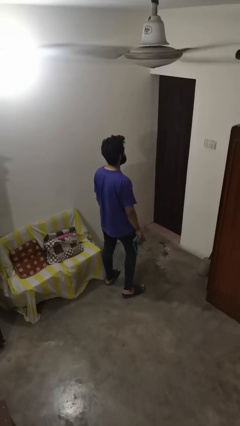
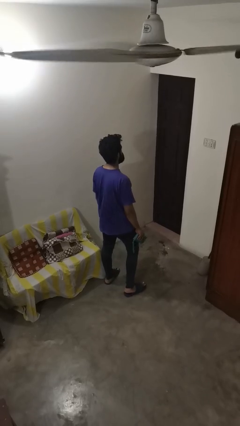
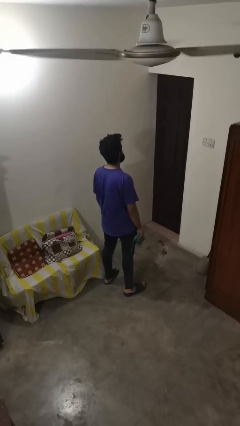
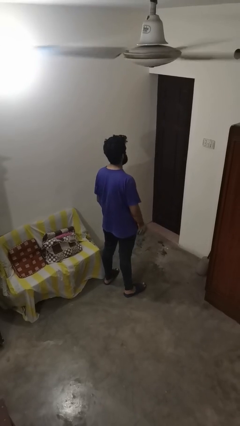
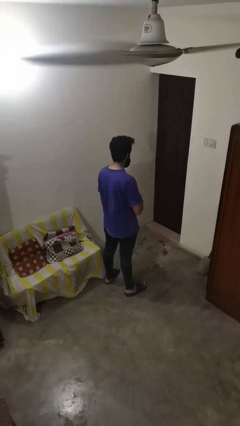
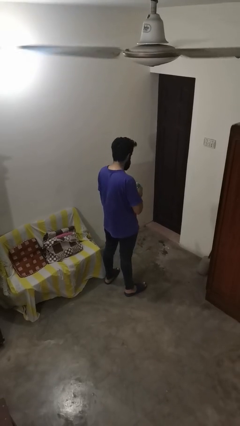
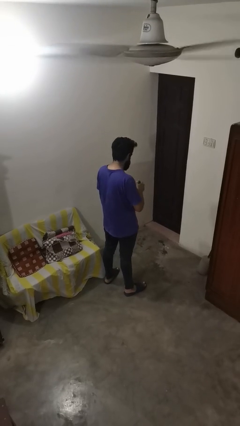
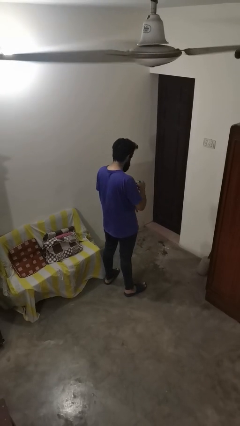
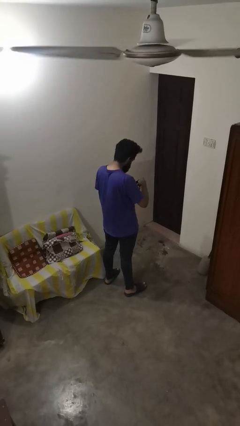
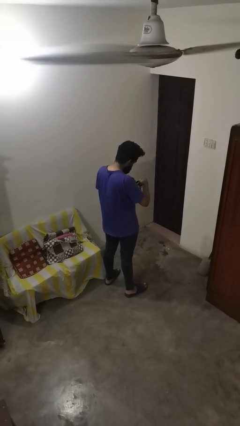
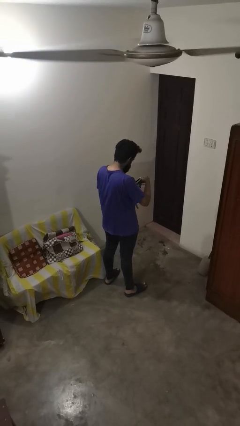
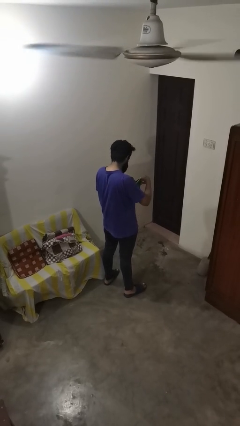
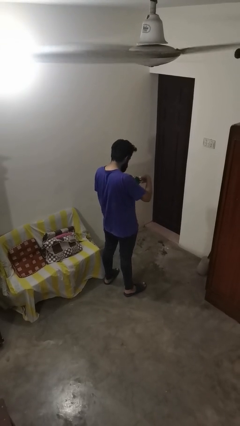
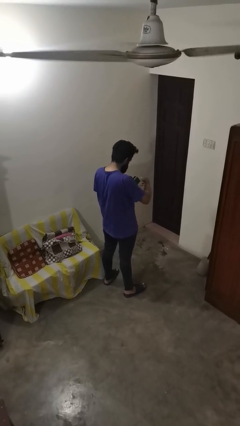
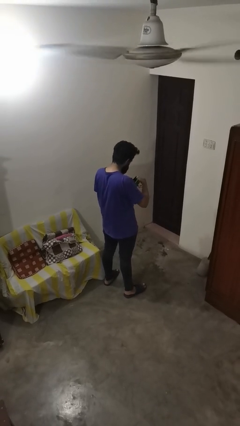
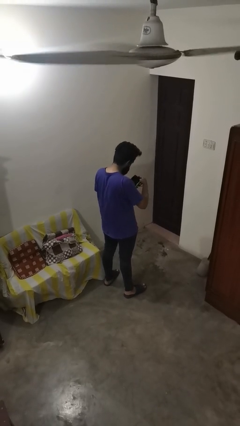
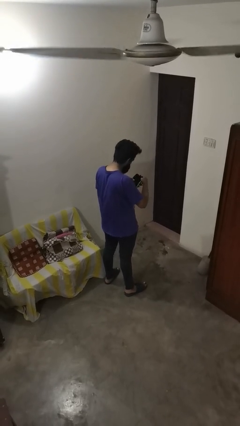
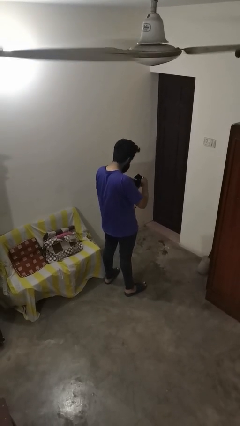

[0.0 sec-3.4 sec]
person searches in bag

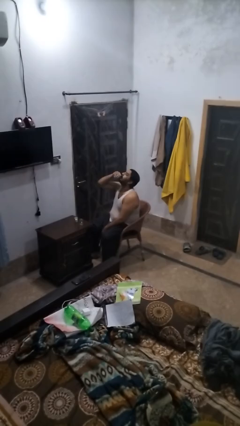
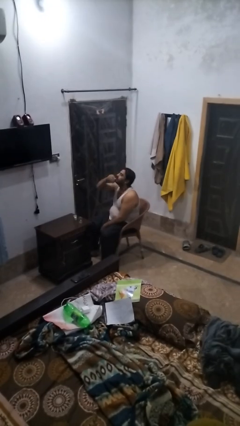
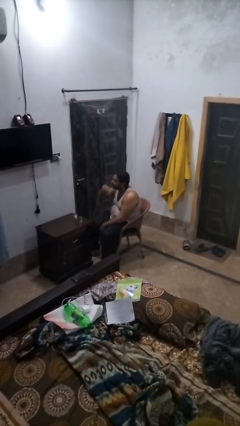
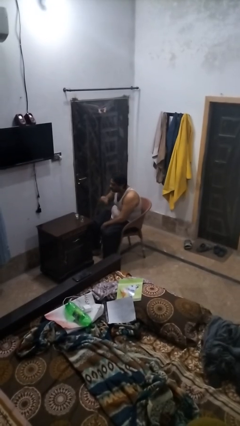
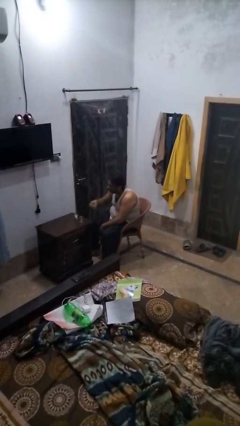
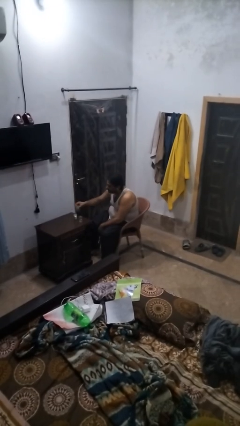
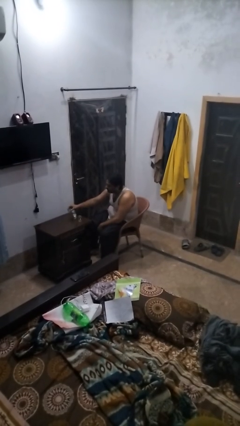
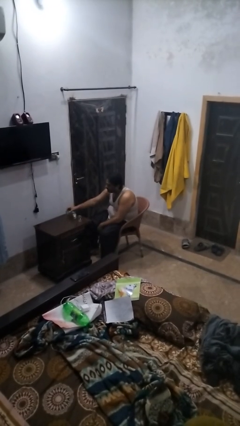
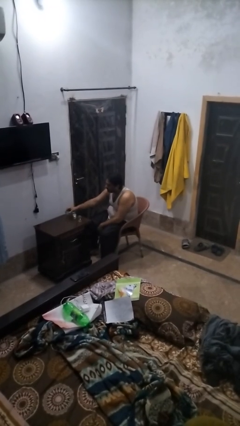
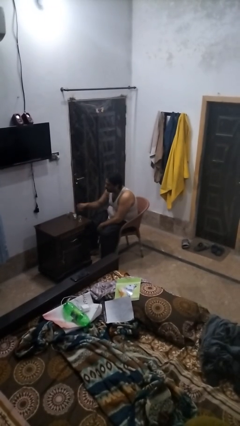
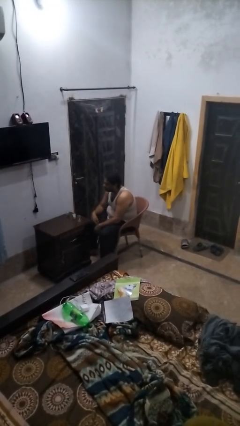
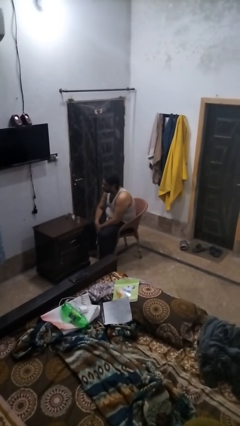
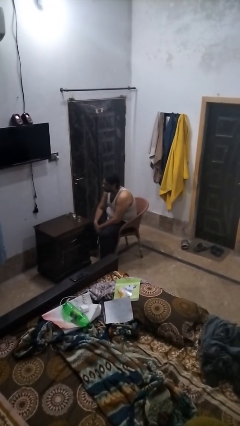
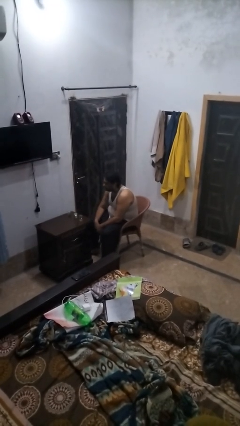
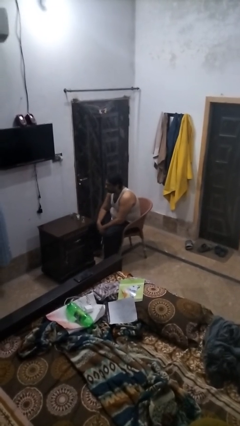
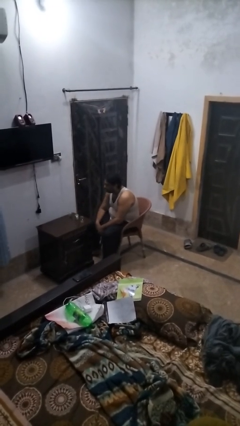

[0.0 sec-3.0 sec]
person puts down object on table

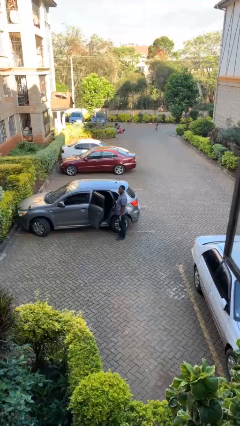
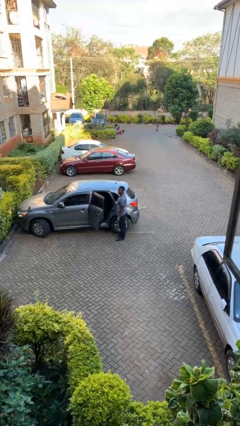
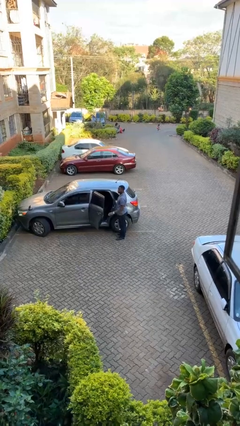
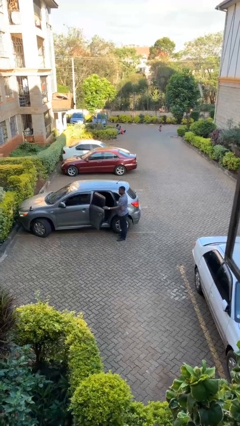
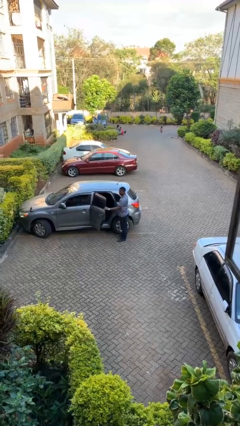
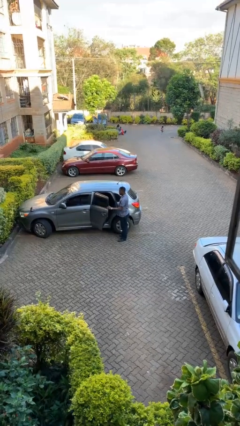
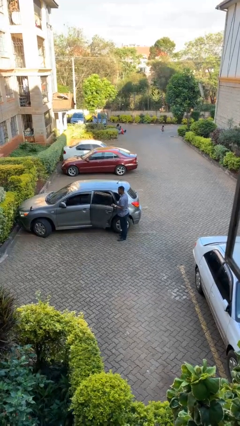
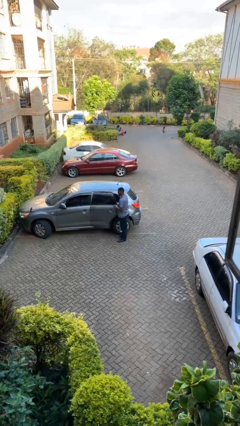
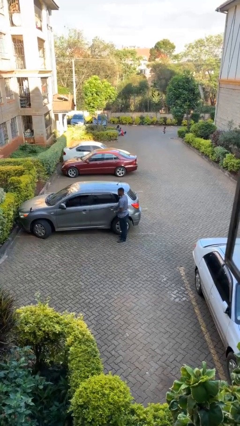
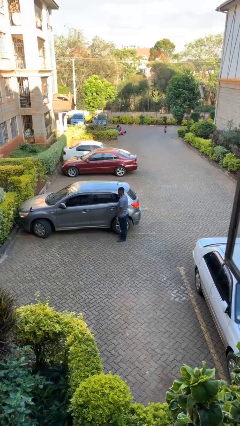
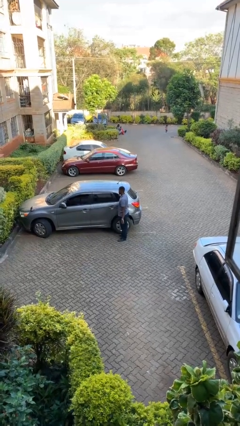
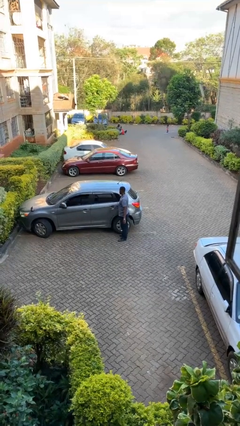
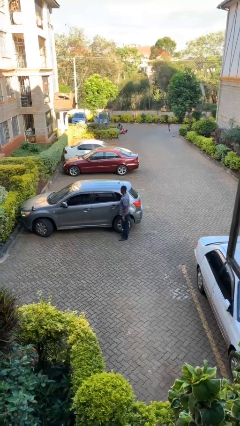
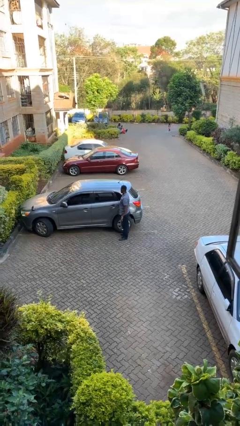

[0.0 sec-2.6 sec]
person closes car door

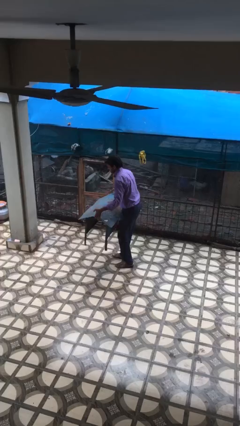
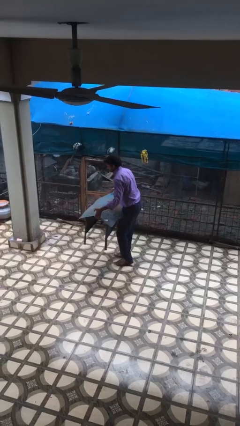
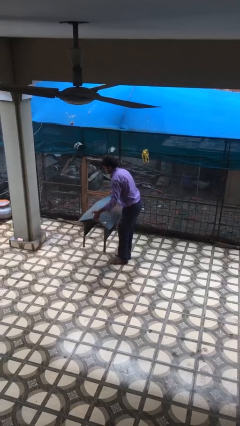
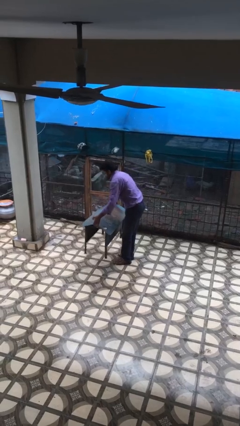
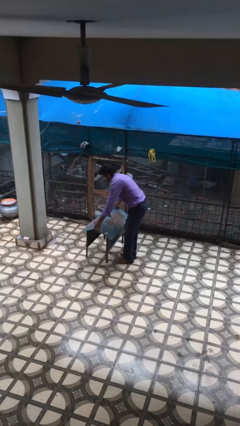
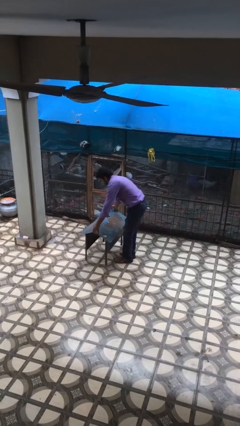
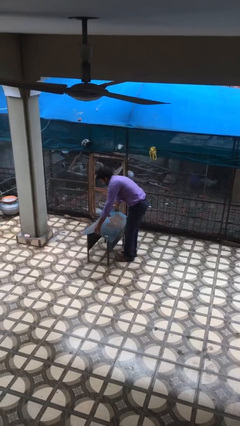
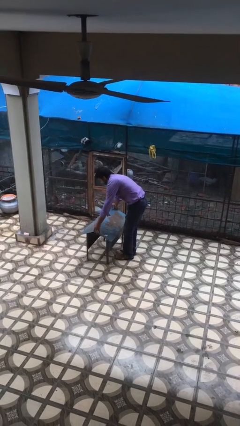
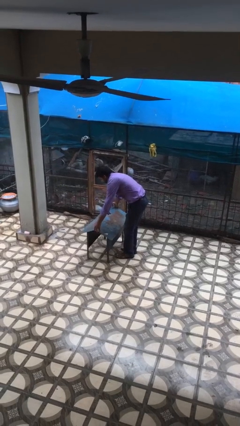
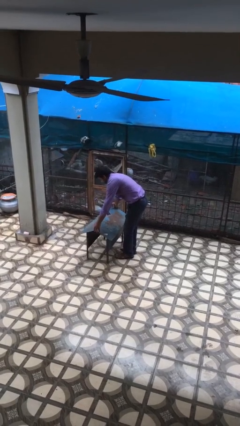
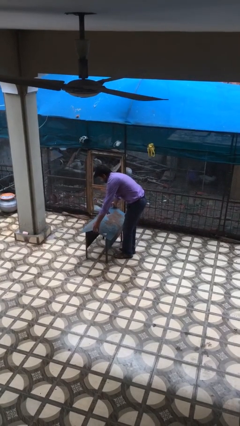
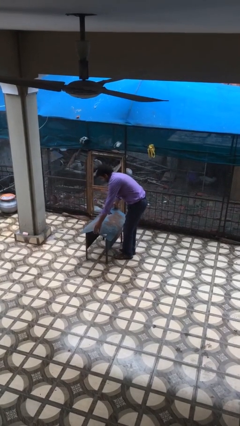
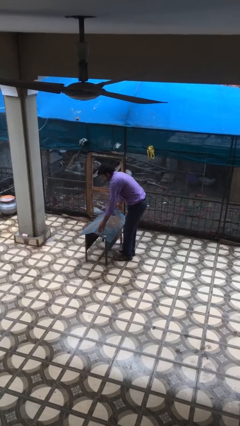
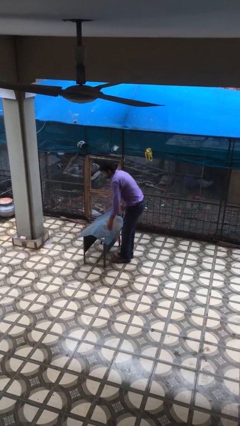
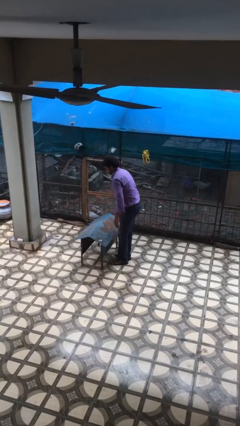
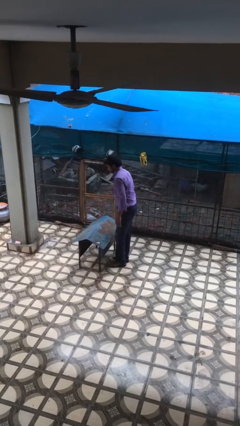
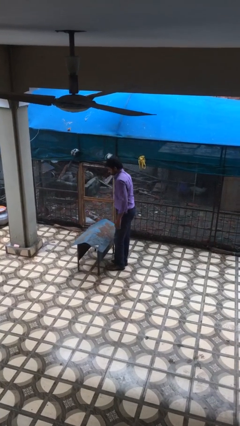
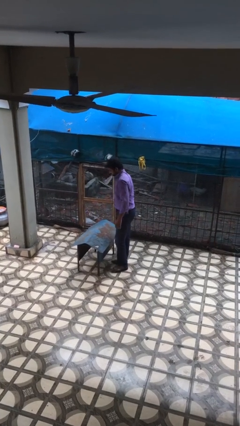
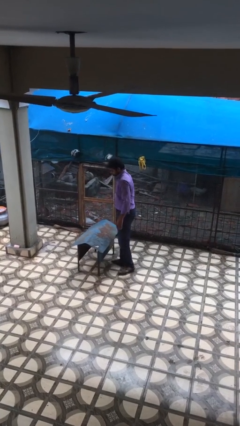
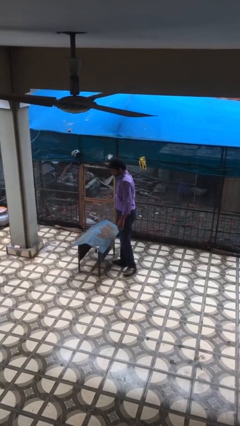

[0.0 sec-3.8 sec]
person puts down object on floor

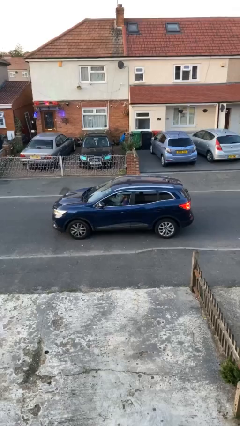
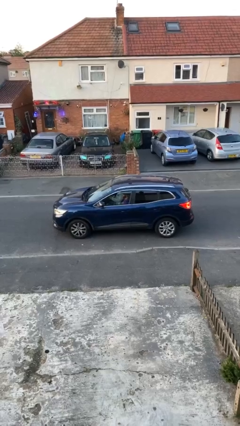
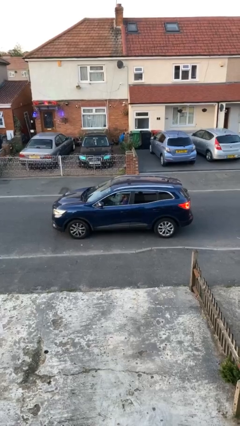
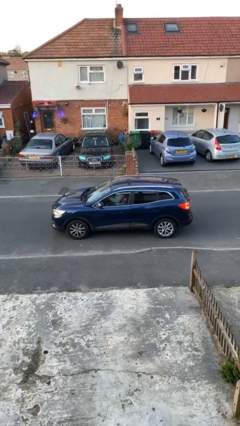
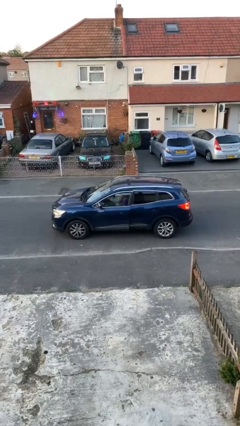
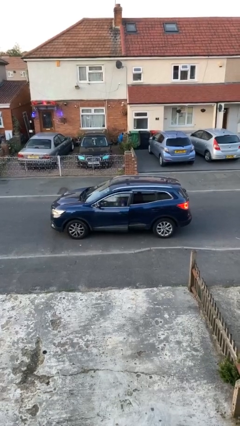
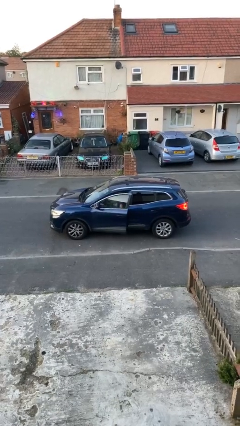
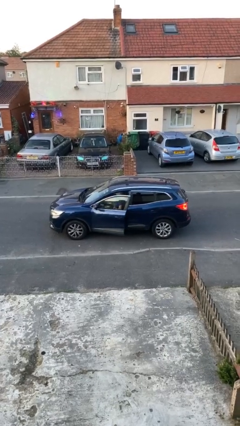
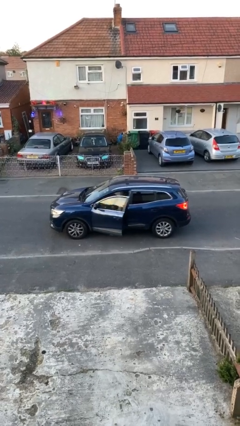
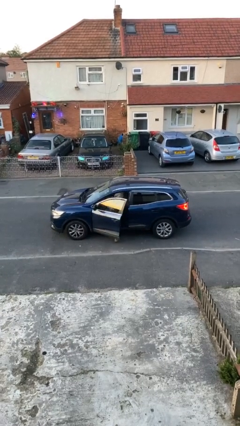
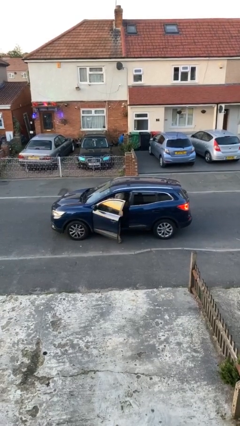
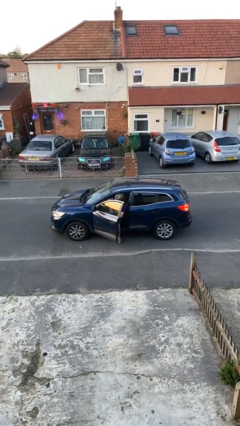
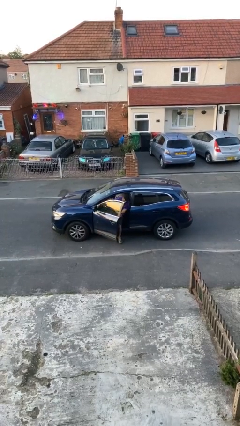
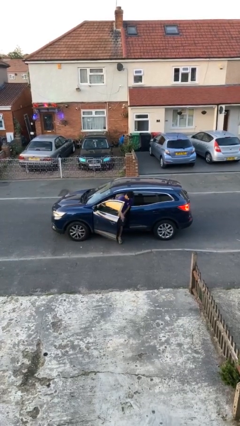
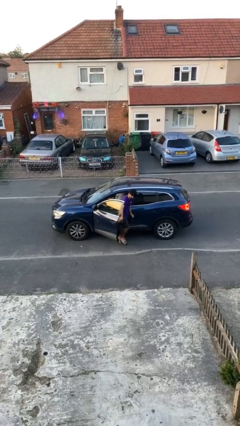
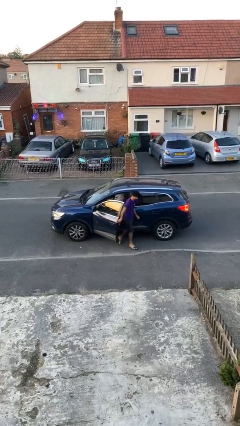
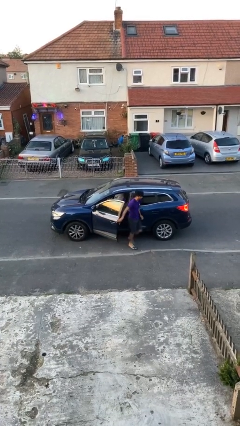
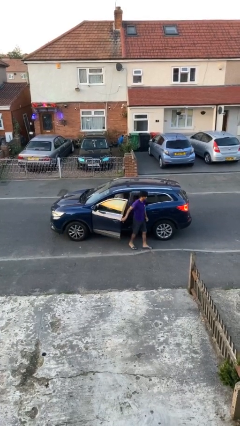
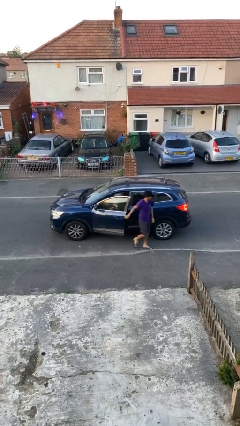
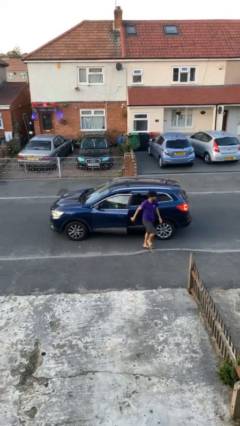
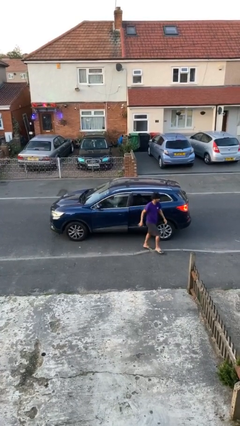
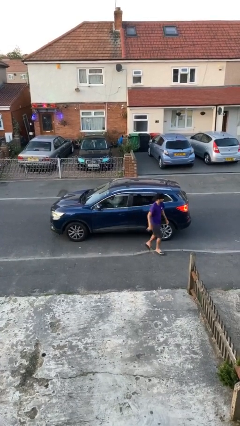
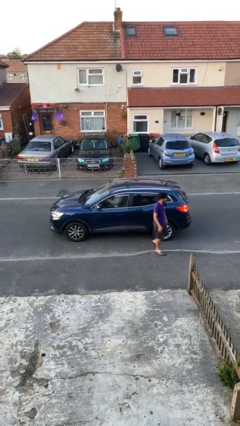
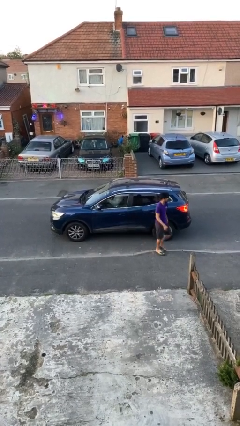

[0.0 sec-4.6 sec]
car drops off person

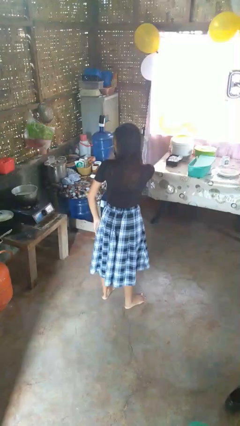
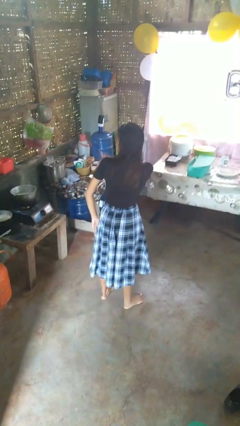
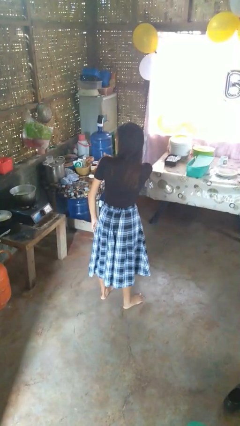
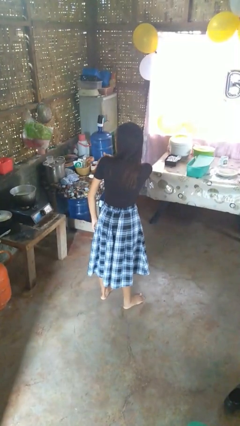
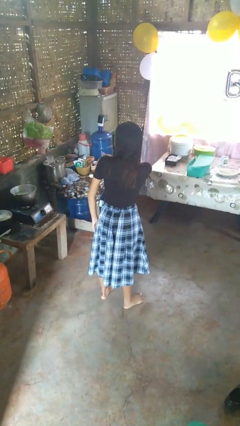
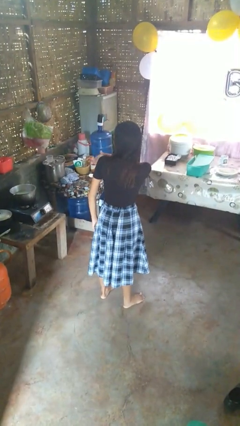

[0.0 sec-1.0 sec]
person swats bug
